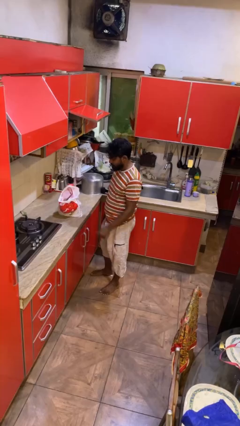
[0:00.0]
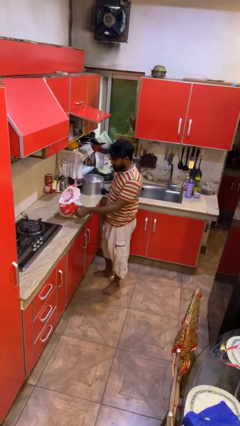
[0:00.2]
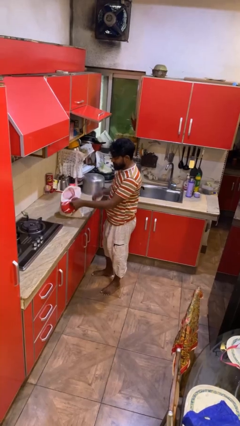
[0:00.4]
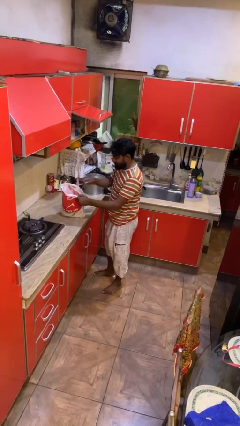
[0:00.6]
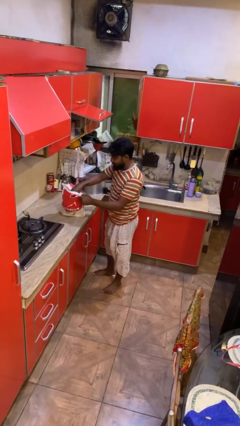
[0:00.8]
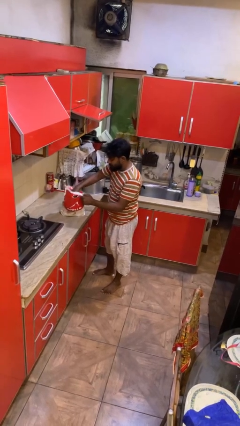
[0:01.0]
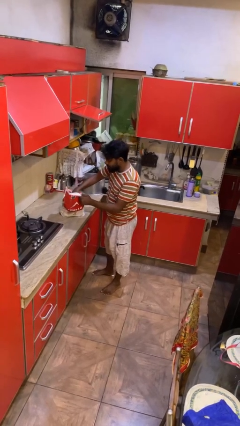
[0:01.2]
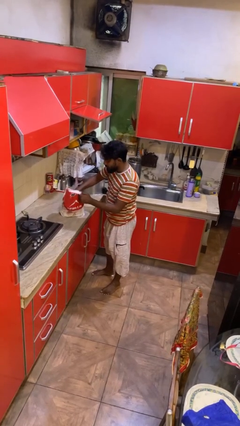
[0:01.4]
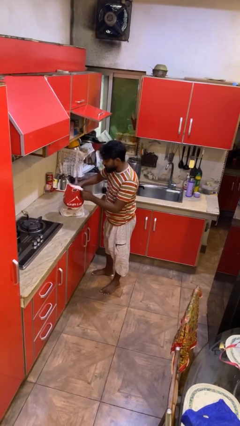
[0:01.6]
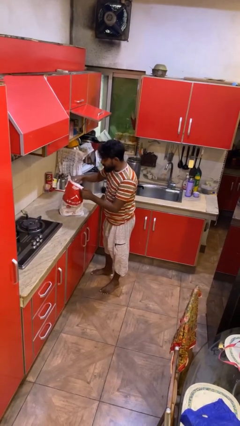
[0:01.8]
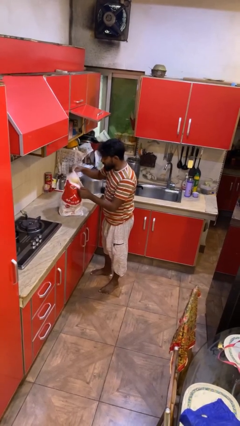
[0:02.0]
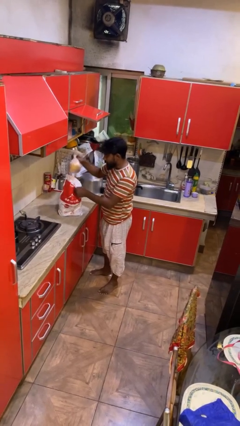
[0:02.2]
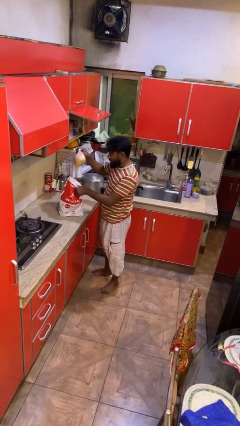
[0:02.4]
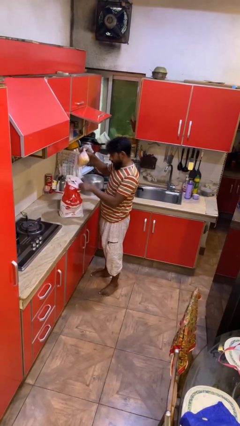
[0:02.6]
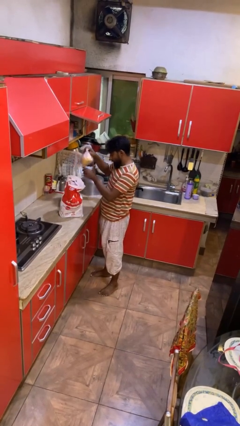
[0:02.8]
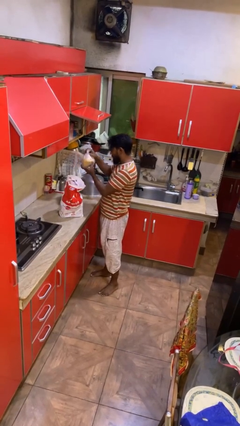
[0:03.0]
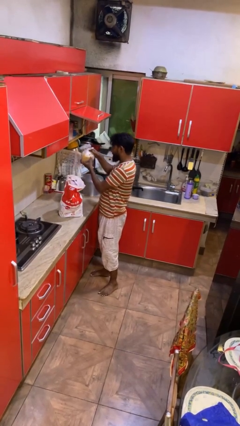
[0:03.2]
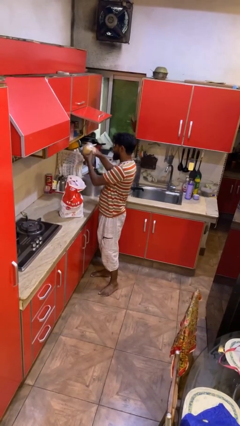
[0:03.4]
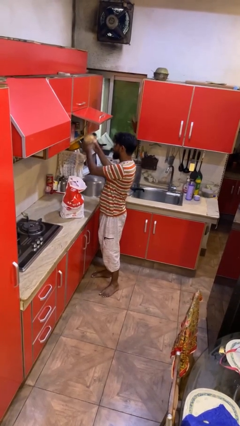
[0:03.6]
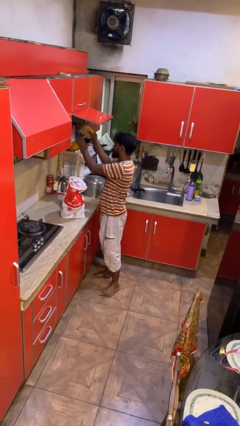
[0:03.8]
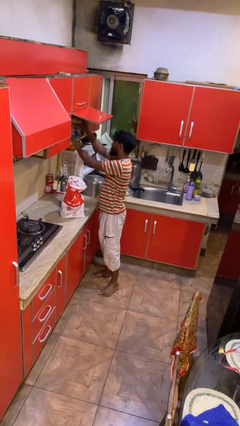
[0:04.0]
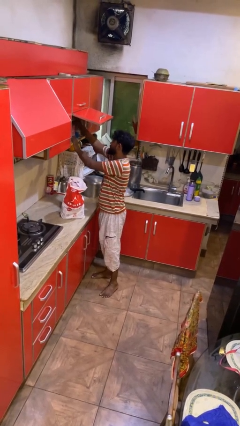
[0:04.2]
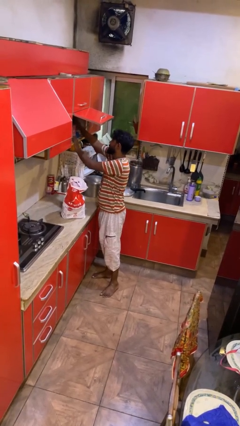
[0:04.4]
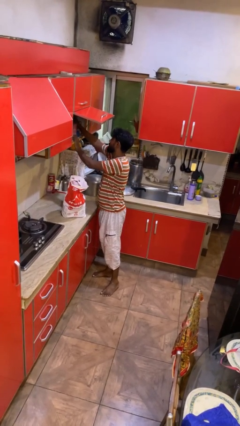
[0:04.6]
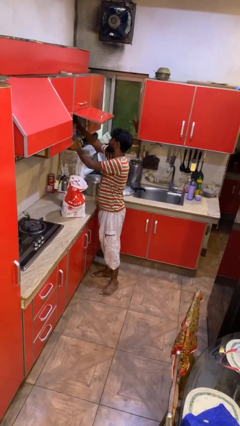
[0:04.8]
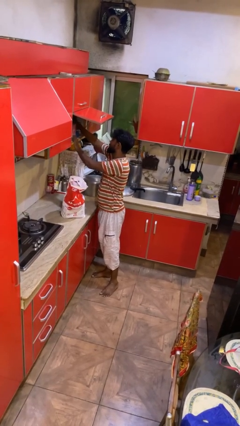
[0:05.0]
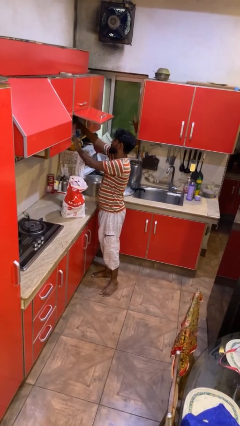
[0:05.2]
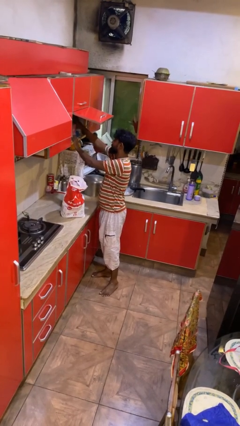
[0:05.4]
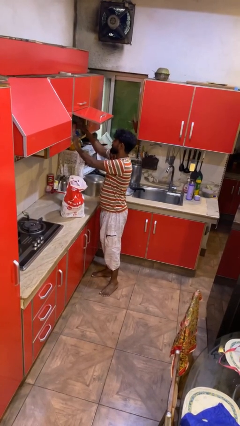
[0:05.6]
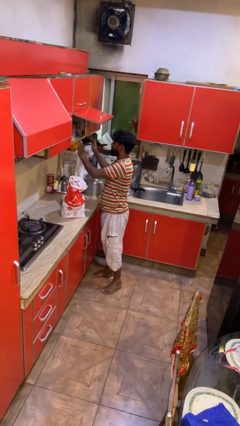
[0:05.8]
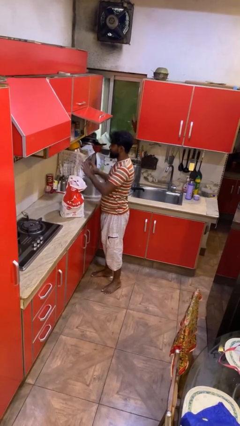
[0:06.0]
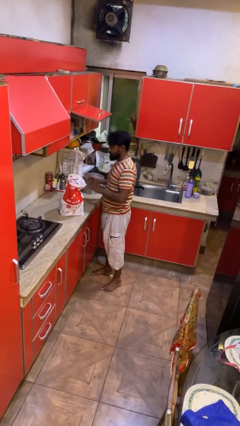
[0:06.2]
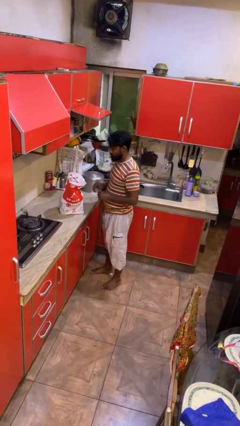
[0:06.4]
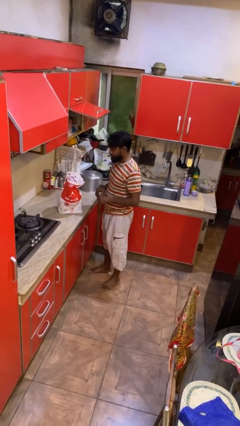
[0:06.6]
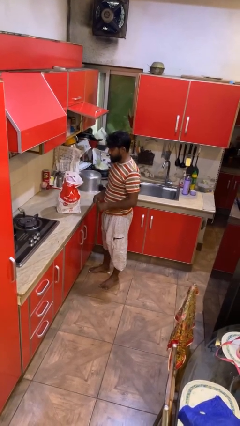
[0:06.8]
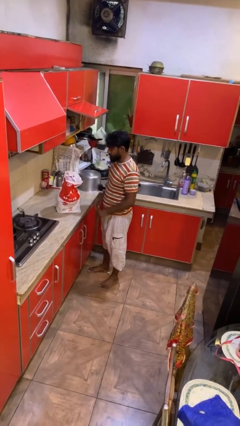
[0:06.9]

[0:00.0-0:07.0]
person loads groceries into cabinet

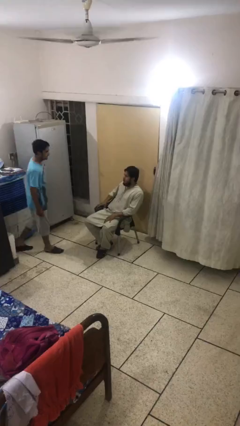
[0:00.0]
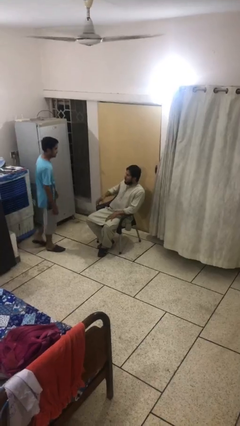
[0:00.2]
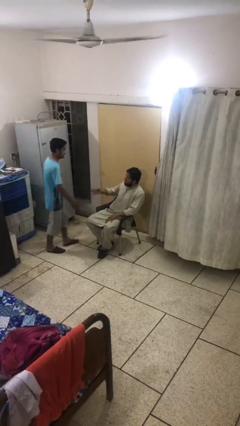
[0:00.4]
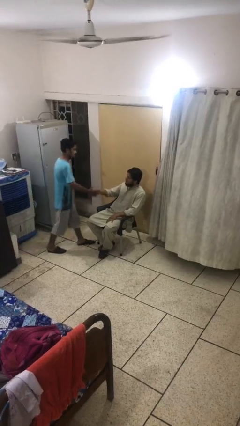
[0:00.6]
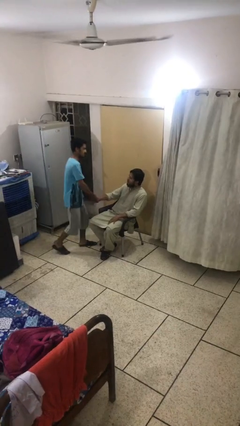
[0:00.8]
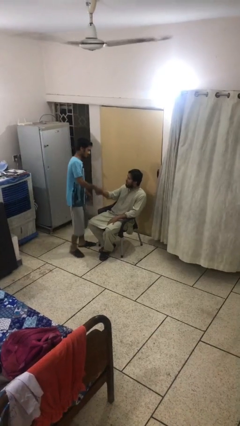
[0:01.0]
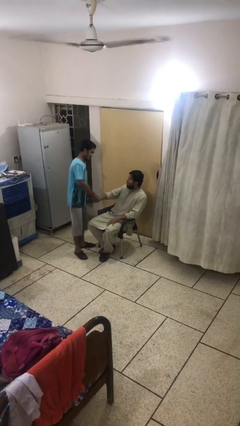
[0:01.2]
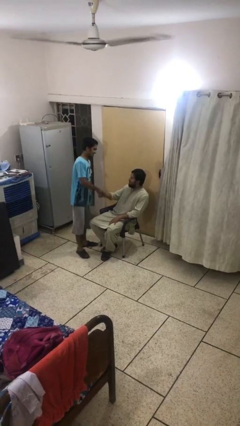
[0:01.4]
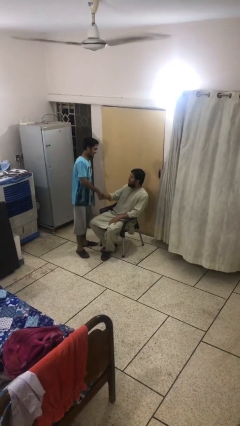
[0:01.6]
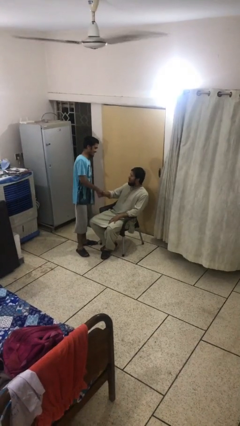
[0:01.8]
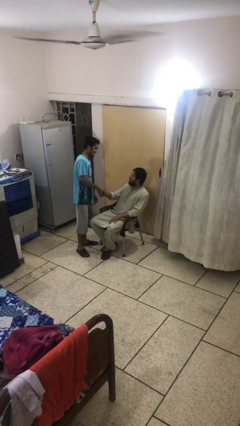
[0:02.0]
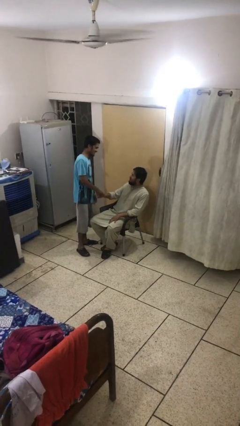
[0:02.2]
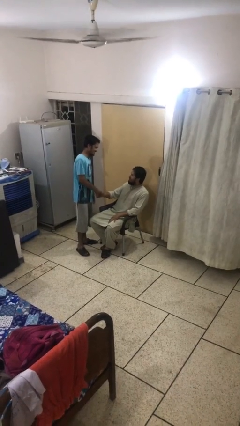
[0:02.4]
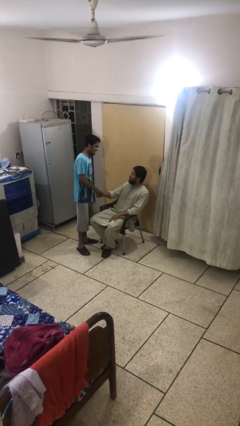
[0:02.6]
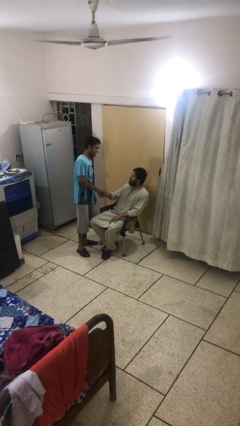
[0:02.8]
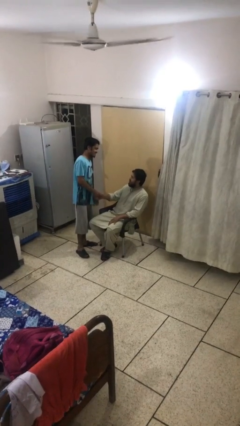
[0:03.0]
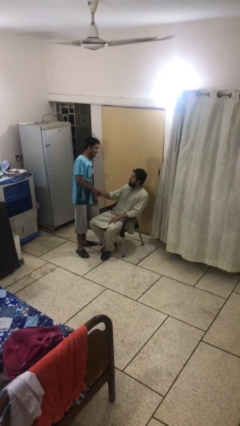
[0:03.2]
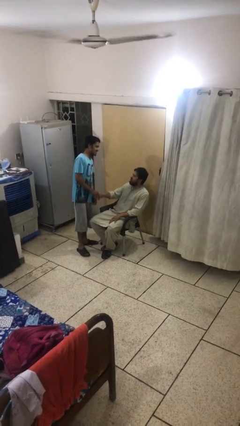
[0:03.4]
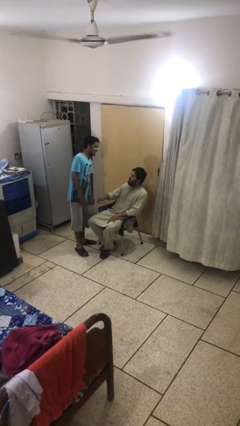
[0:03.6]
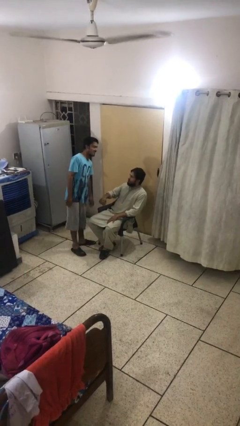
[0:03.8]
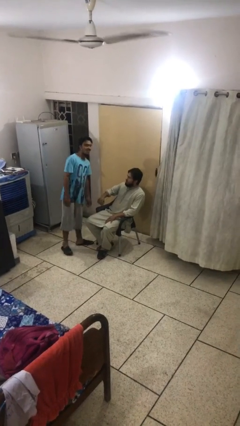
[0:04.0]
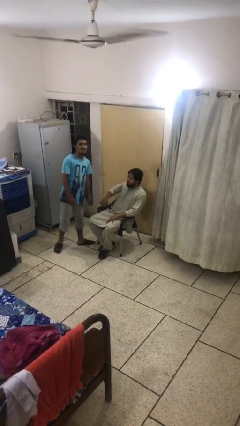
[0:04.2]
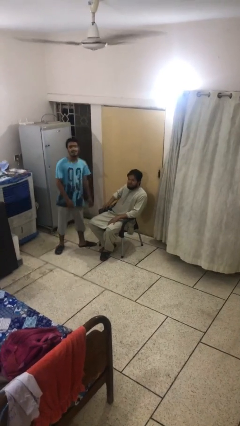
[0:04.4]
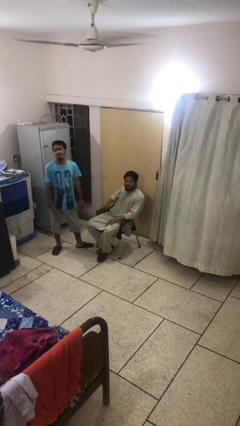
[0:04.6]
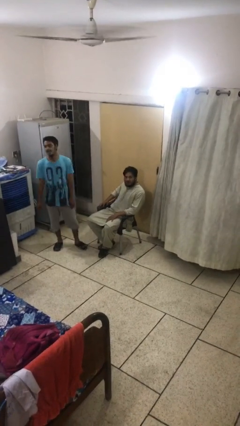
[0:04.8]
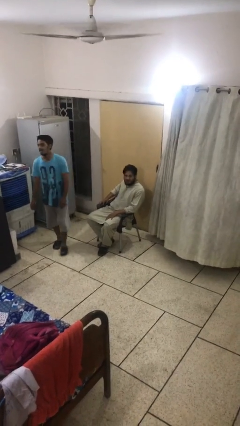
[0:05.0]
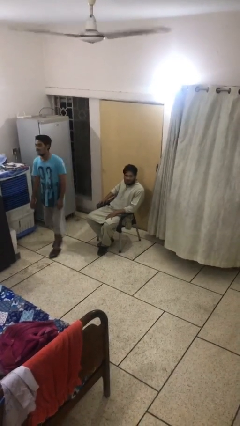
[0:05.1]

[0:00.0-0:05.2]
person shakes hand

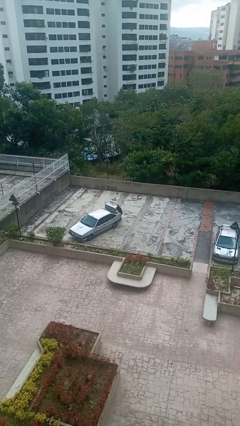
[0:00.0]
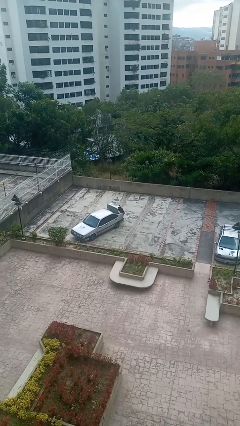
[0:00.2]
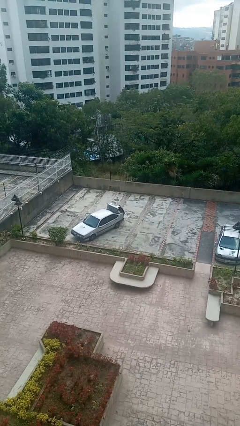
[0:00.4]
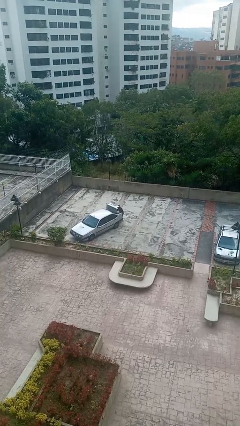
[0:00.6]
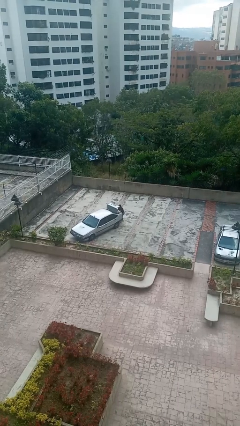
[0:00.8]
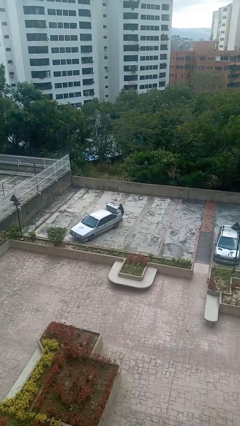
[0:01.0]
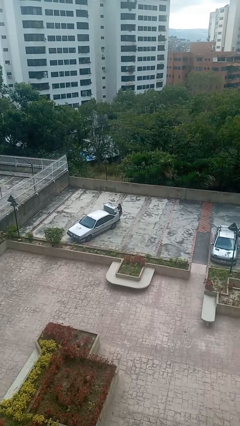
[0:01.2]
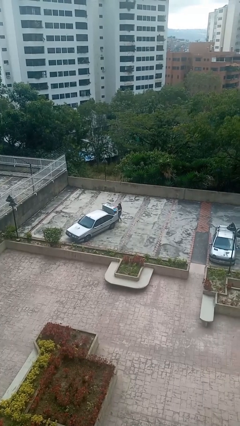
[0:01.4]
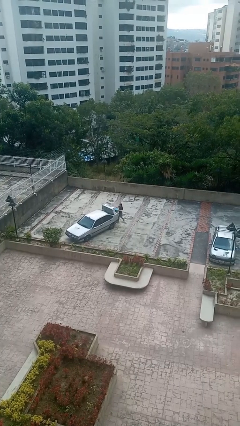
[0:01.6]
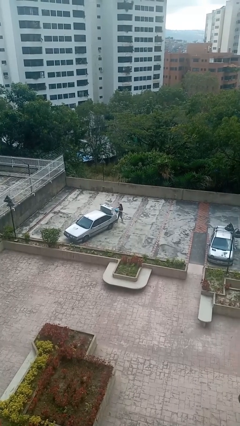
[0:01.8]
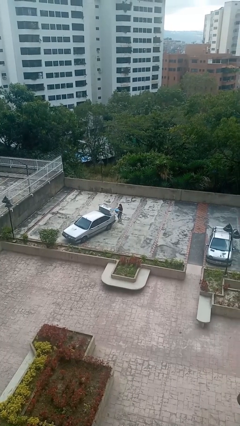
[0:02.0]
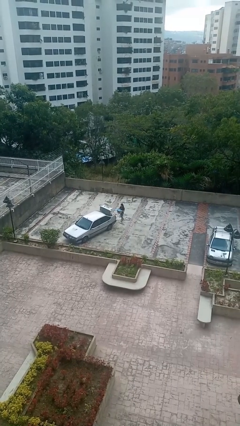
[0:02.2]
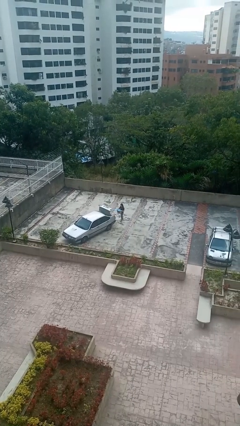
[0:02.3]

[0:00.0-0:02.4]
person unloads car

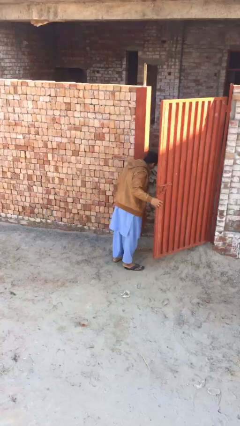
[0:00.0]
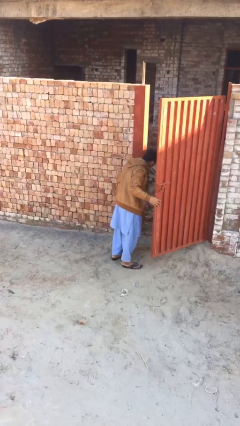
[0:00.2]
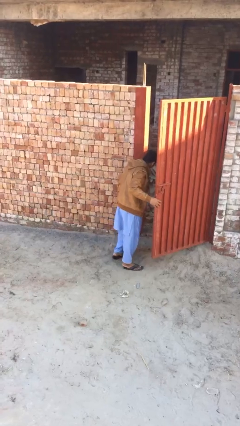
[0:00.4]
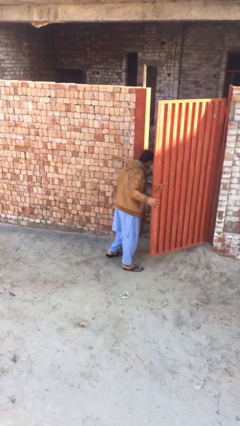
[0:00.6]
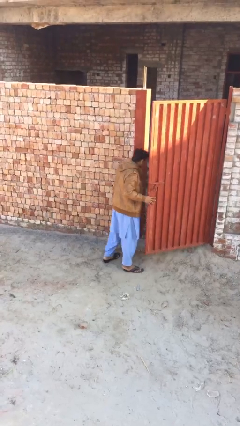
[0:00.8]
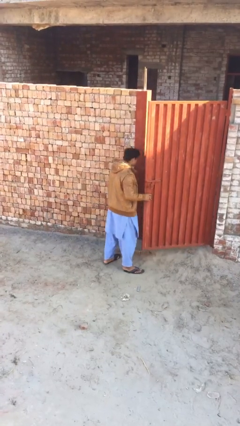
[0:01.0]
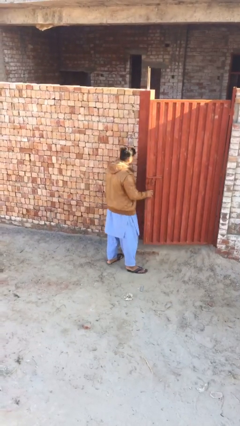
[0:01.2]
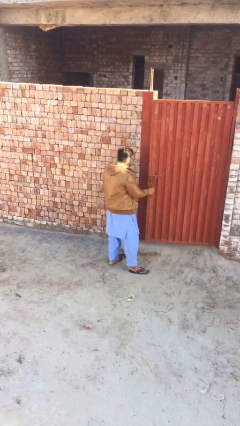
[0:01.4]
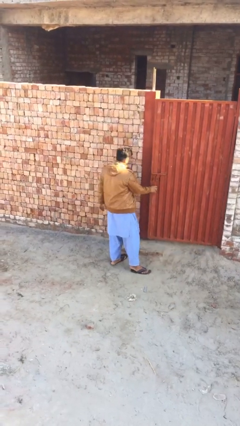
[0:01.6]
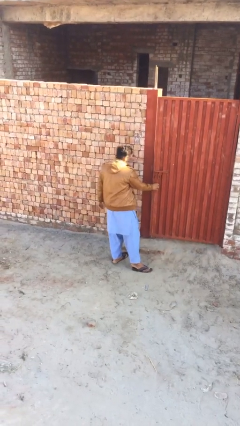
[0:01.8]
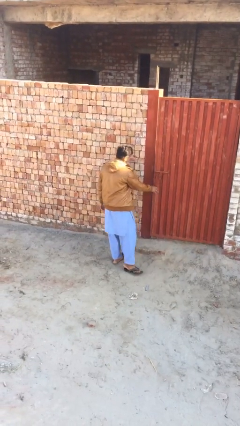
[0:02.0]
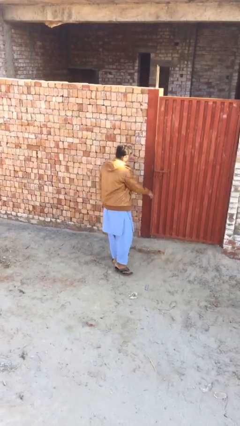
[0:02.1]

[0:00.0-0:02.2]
person closes facility door

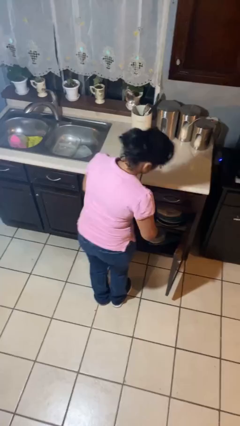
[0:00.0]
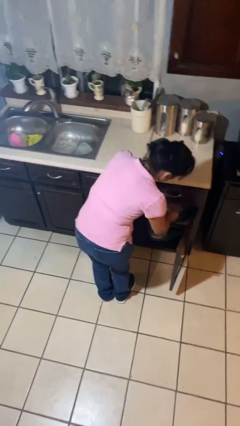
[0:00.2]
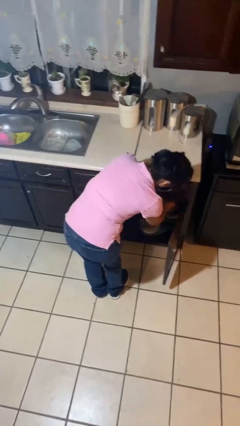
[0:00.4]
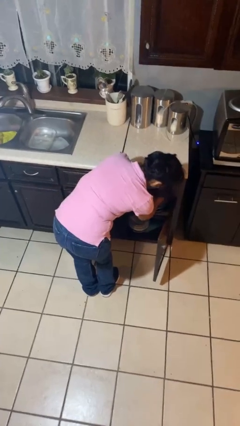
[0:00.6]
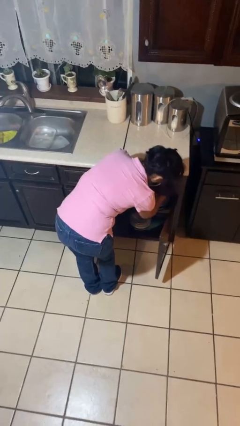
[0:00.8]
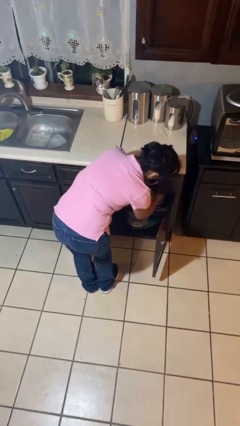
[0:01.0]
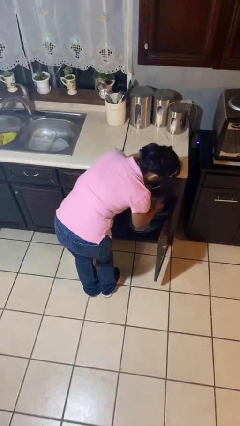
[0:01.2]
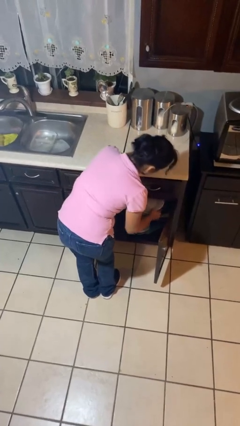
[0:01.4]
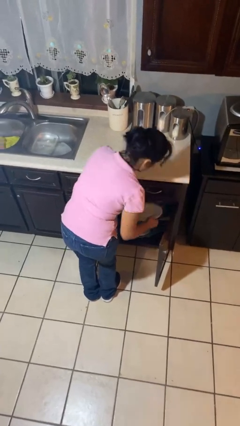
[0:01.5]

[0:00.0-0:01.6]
person puts object in cabinet
